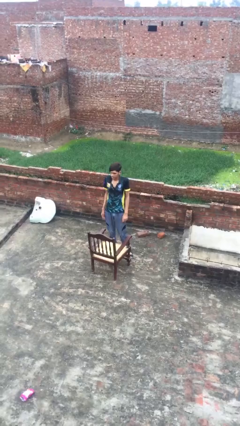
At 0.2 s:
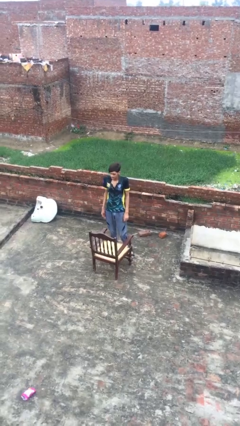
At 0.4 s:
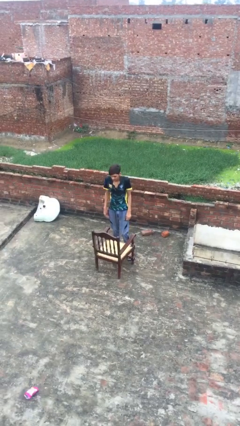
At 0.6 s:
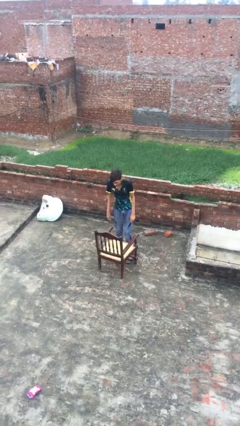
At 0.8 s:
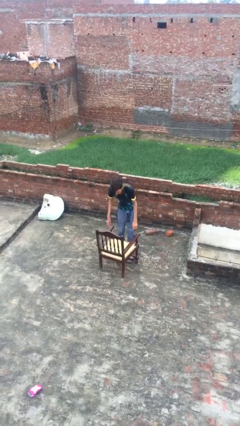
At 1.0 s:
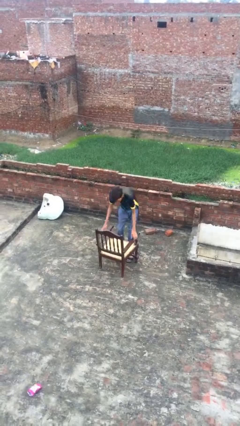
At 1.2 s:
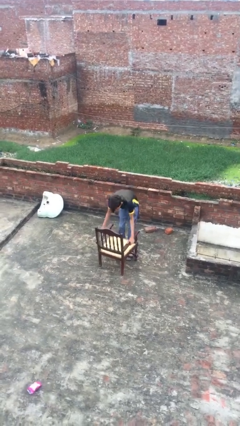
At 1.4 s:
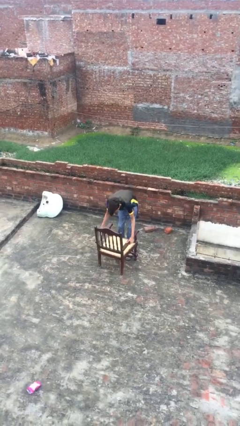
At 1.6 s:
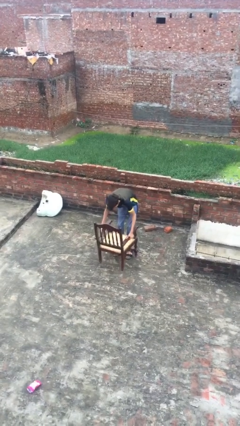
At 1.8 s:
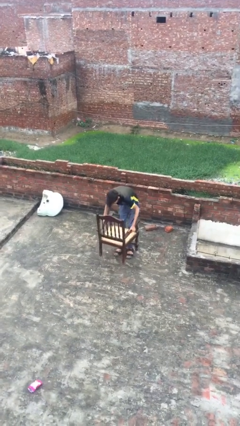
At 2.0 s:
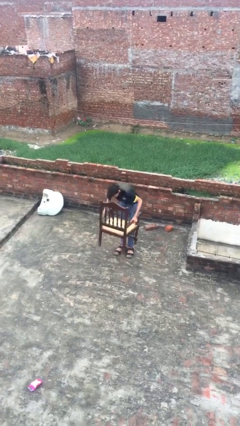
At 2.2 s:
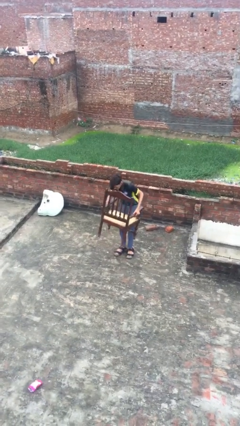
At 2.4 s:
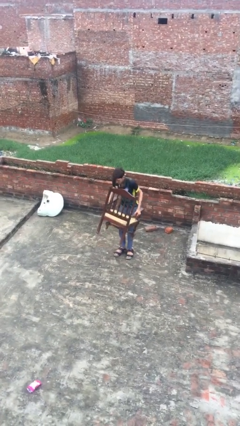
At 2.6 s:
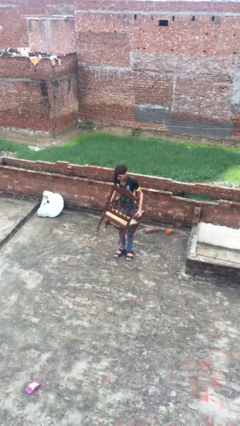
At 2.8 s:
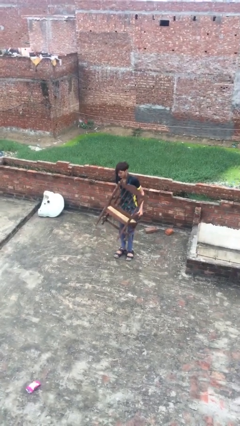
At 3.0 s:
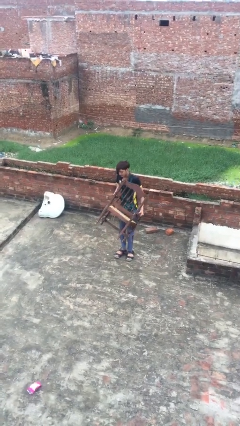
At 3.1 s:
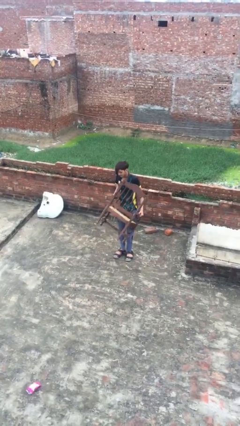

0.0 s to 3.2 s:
person picks up object from floor

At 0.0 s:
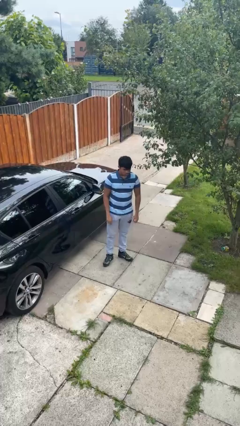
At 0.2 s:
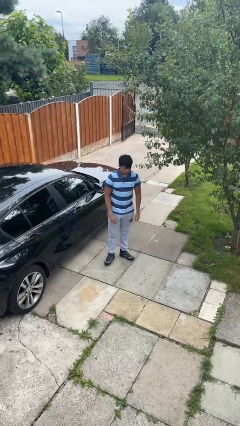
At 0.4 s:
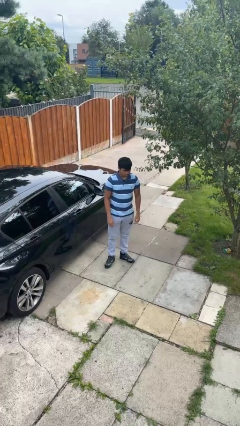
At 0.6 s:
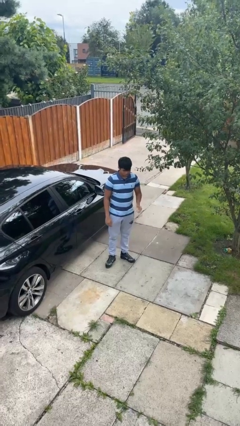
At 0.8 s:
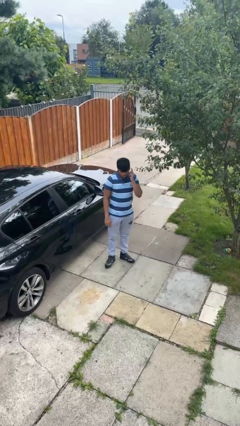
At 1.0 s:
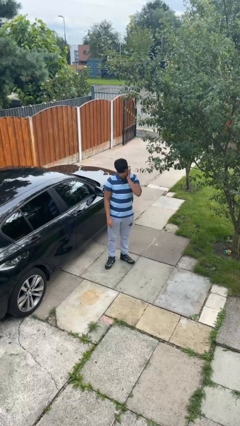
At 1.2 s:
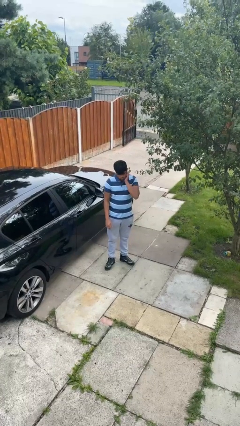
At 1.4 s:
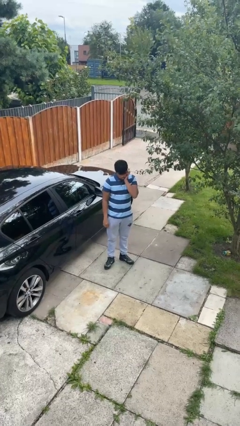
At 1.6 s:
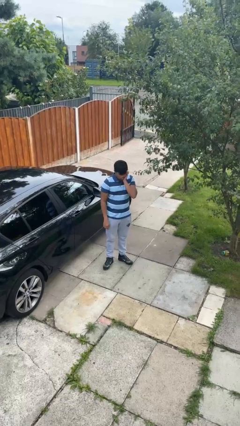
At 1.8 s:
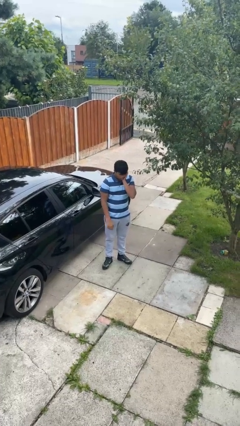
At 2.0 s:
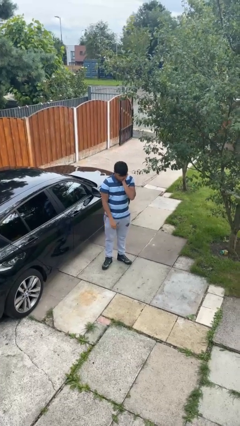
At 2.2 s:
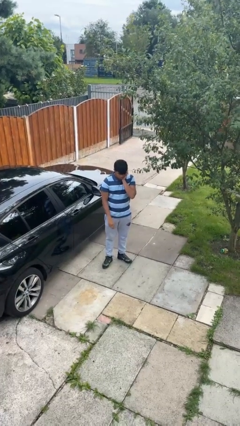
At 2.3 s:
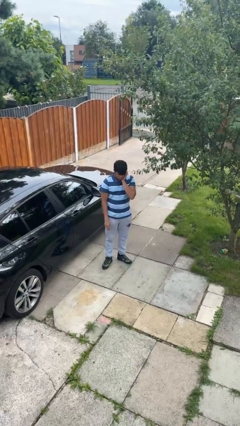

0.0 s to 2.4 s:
person puts fingers in ear

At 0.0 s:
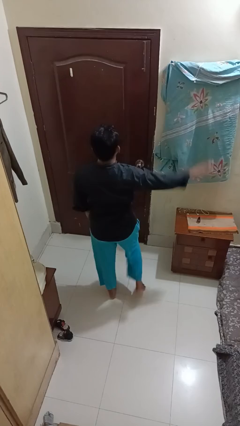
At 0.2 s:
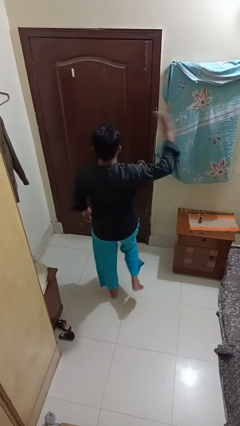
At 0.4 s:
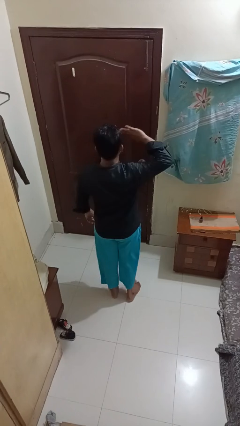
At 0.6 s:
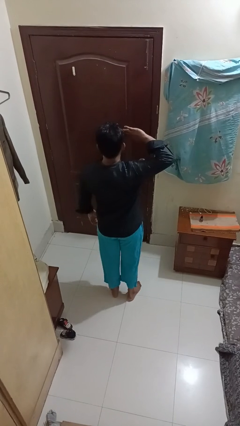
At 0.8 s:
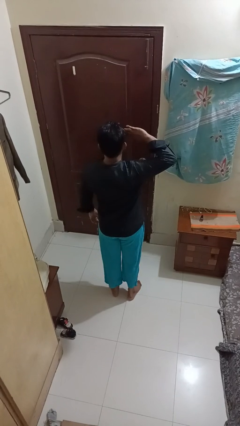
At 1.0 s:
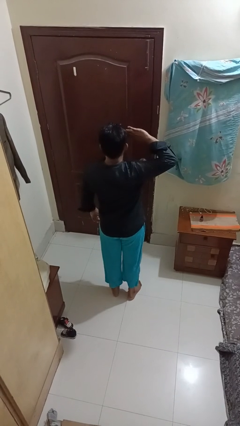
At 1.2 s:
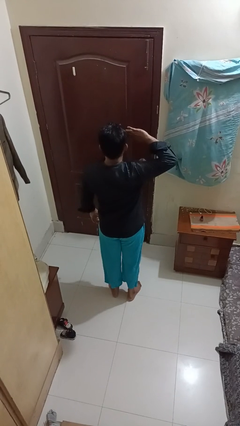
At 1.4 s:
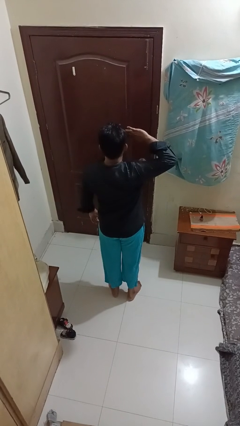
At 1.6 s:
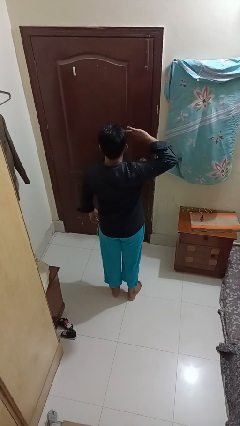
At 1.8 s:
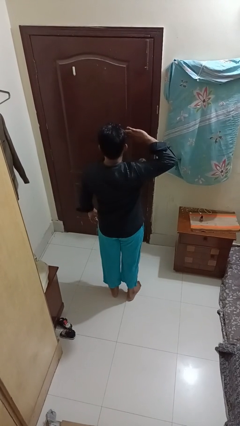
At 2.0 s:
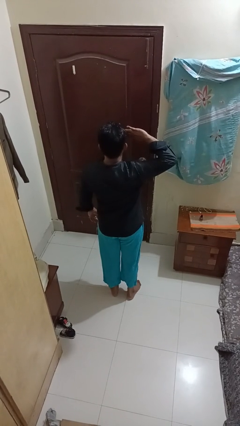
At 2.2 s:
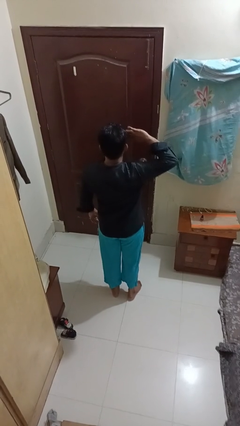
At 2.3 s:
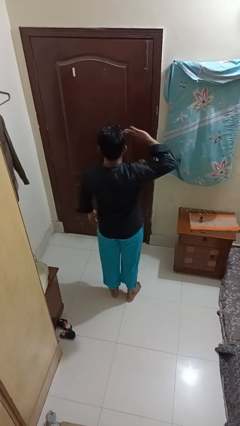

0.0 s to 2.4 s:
person salutes

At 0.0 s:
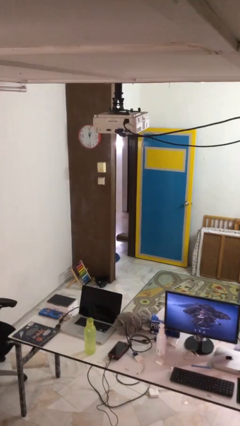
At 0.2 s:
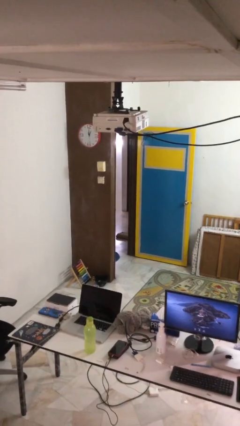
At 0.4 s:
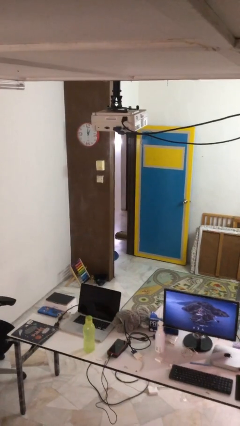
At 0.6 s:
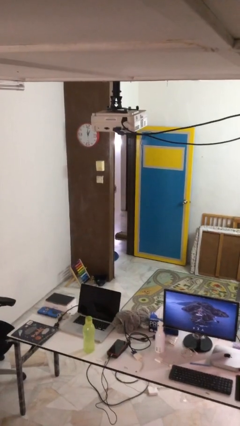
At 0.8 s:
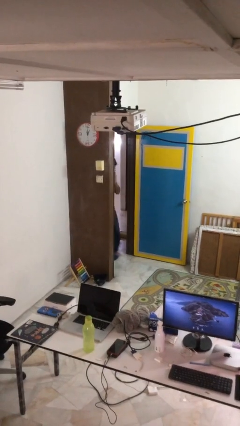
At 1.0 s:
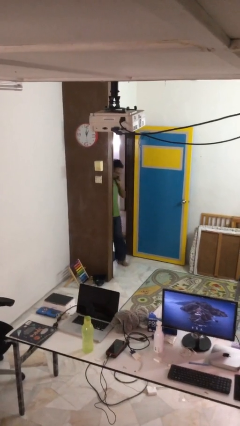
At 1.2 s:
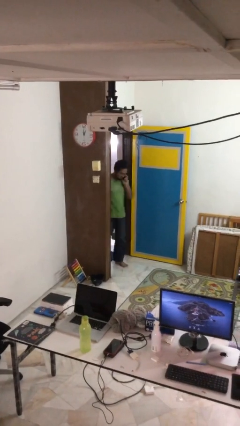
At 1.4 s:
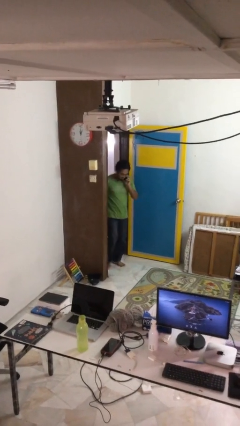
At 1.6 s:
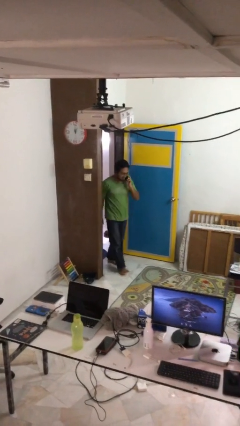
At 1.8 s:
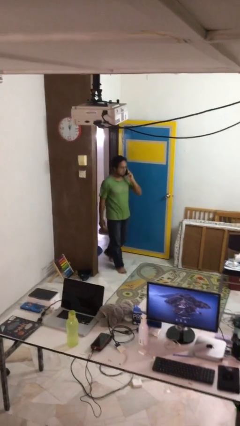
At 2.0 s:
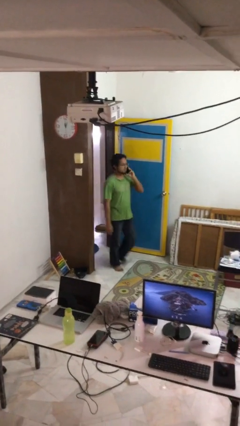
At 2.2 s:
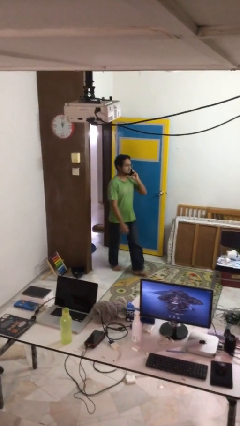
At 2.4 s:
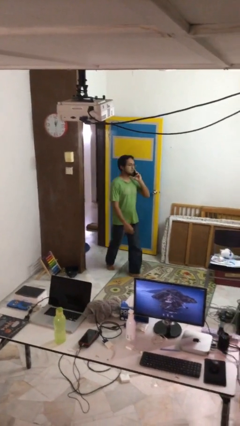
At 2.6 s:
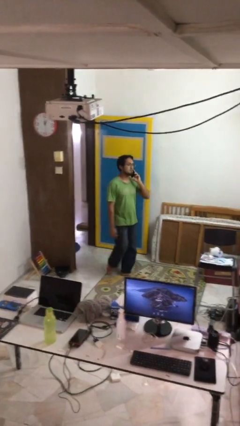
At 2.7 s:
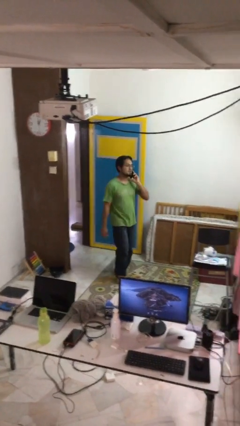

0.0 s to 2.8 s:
person enters scene through structure

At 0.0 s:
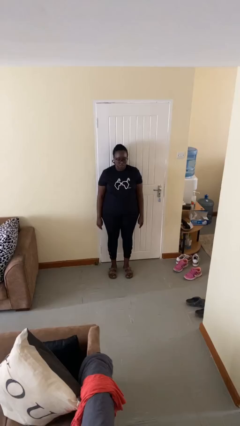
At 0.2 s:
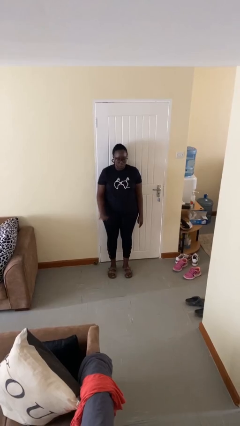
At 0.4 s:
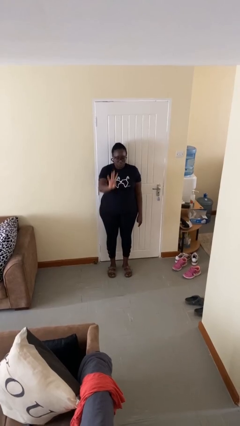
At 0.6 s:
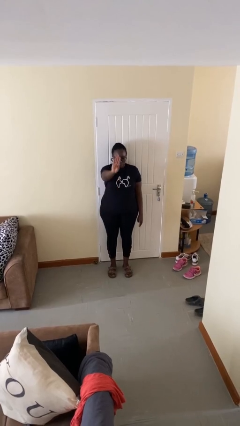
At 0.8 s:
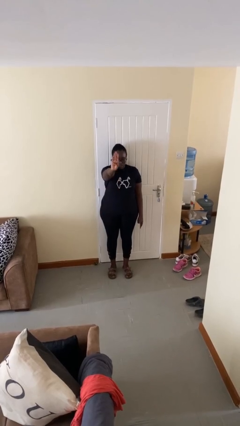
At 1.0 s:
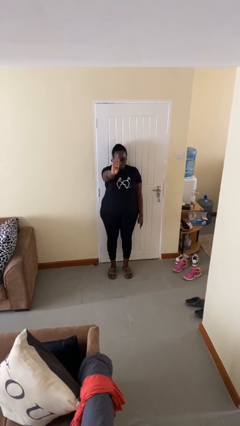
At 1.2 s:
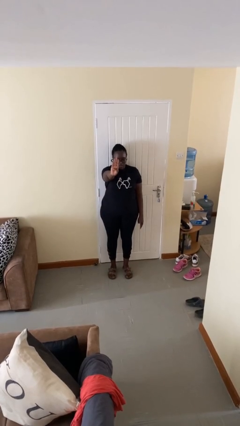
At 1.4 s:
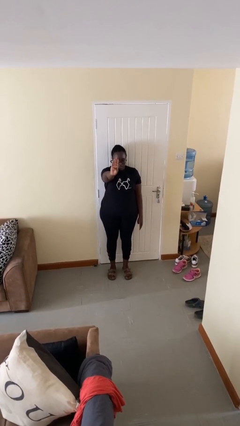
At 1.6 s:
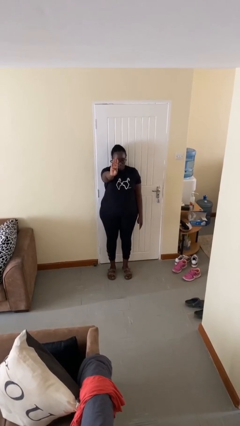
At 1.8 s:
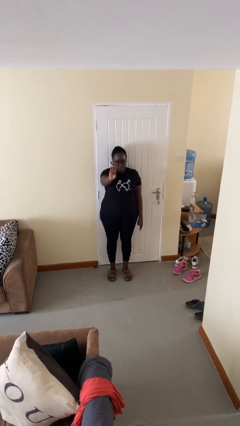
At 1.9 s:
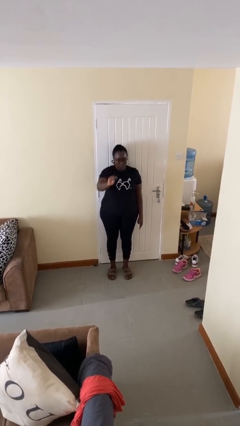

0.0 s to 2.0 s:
person gestures number four

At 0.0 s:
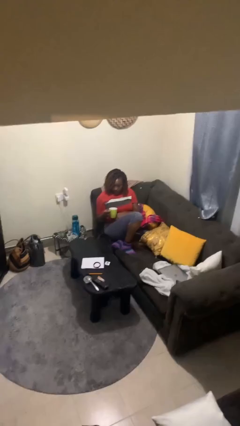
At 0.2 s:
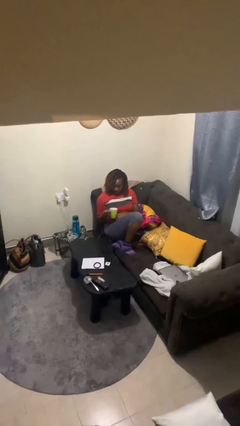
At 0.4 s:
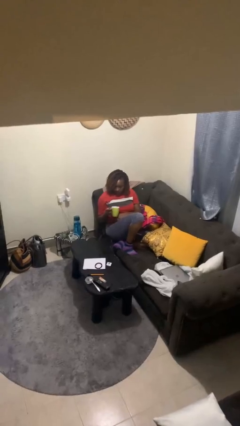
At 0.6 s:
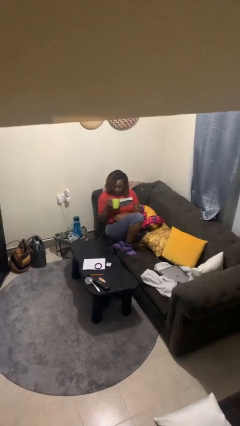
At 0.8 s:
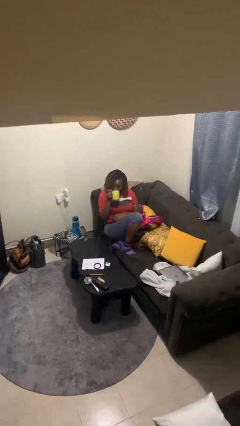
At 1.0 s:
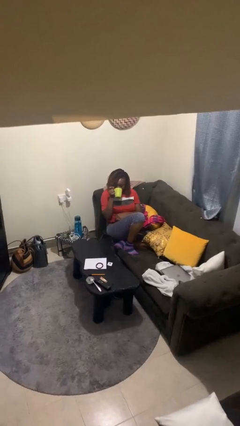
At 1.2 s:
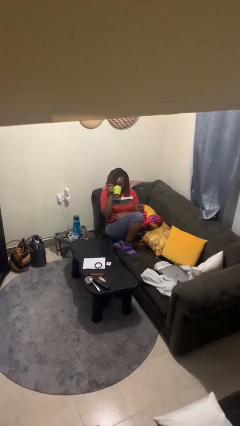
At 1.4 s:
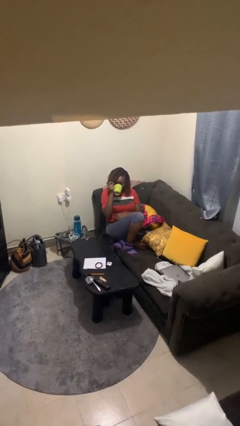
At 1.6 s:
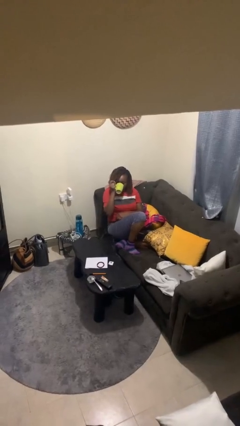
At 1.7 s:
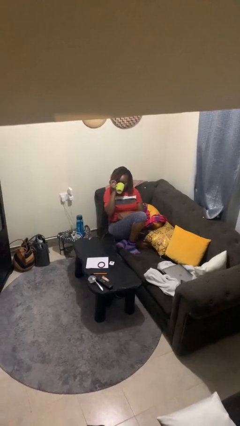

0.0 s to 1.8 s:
person drinks from mug

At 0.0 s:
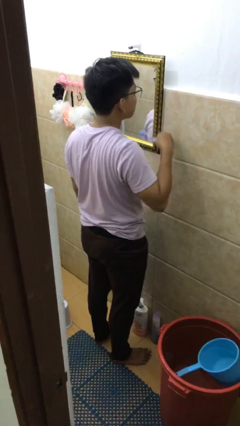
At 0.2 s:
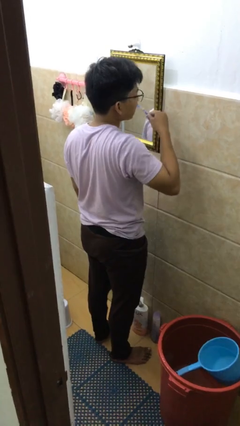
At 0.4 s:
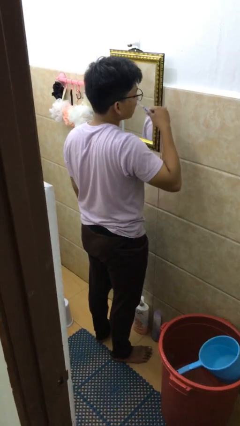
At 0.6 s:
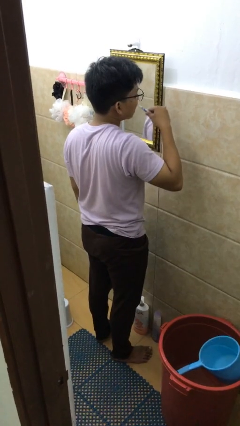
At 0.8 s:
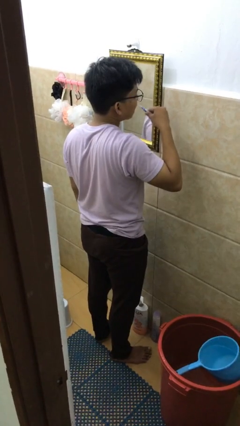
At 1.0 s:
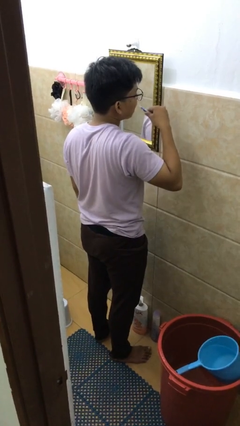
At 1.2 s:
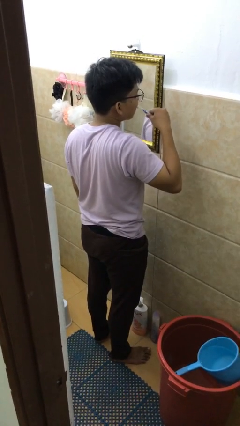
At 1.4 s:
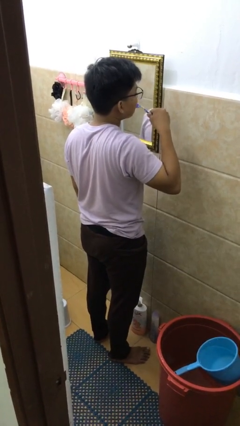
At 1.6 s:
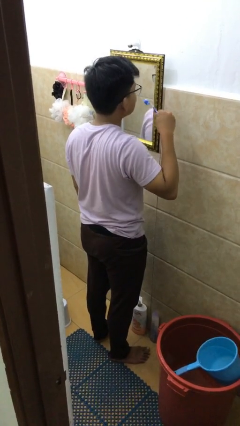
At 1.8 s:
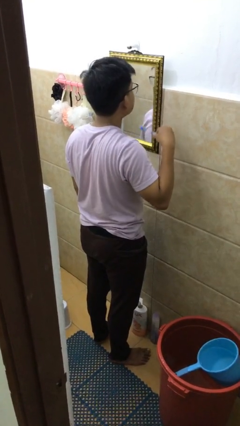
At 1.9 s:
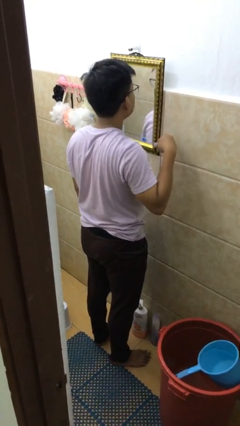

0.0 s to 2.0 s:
person brushes teeth

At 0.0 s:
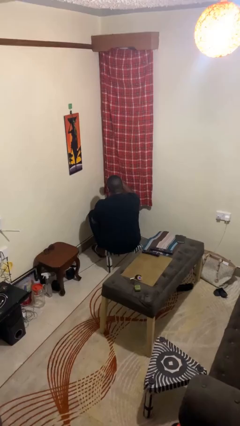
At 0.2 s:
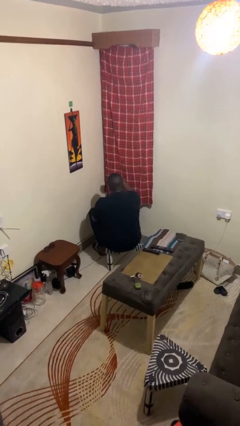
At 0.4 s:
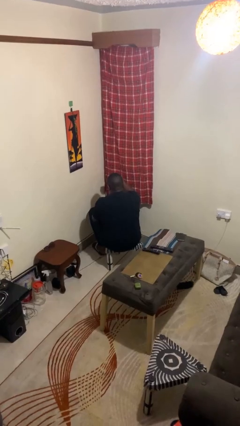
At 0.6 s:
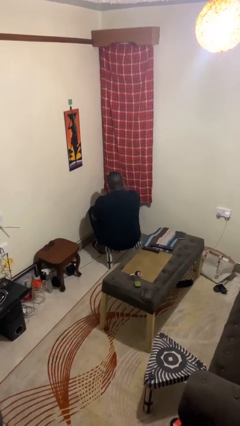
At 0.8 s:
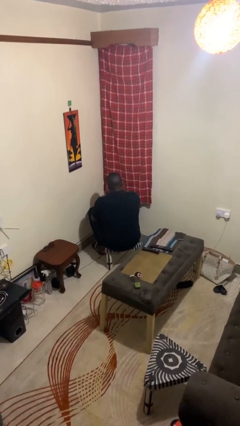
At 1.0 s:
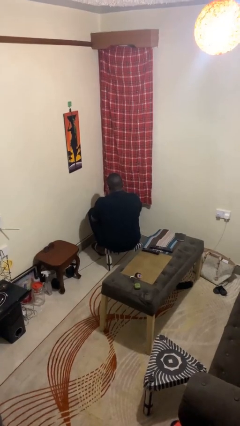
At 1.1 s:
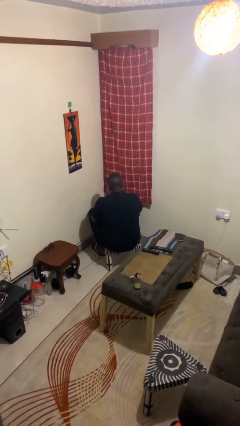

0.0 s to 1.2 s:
person gestures swipe down
